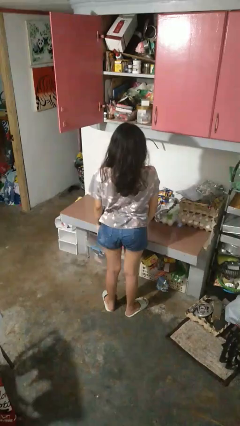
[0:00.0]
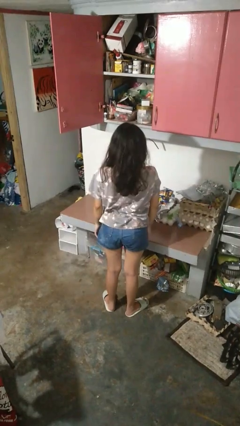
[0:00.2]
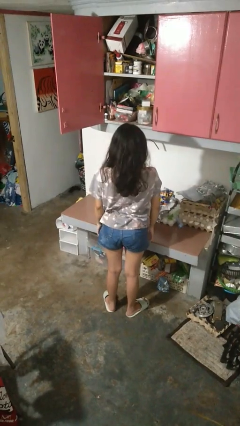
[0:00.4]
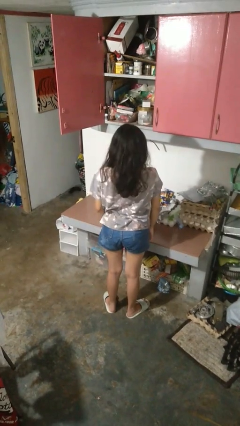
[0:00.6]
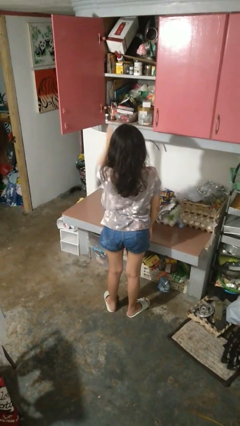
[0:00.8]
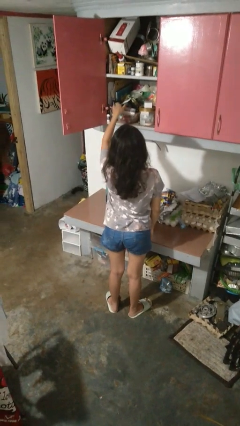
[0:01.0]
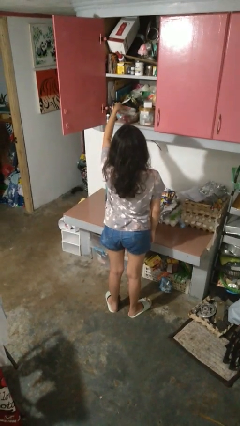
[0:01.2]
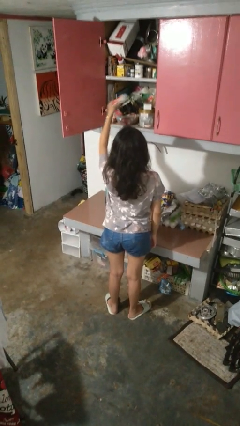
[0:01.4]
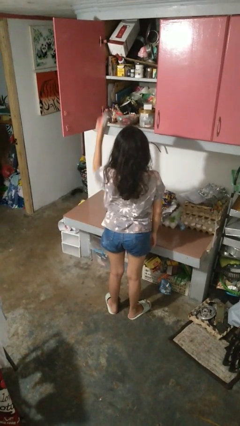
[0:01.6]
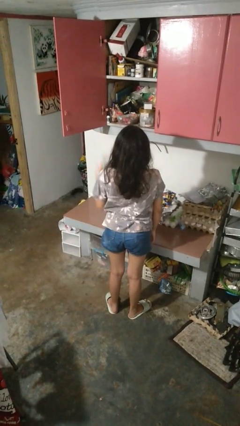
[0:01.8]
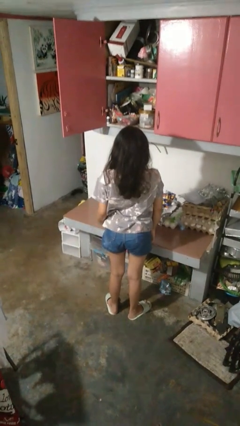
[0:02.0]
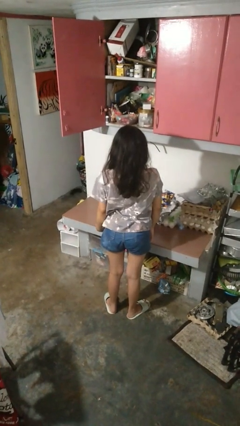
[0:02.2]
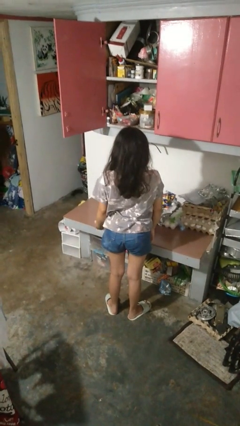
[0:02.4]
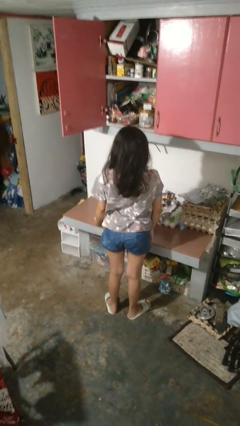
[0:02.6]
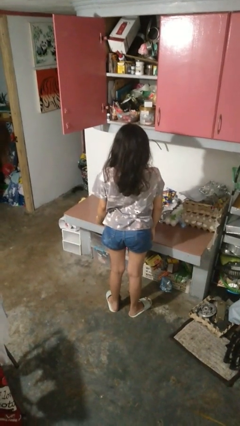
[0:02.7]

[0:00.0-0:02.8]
person takes object from cabinet

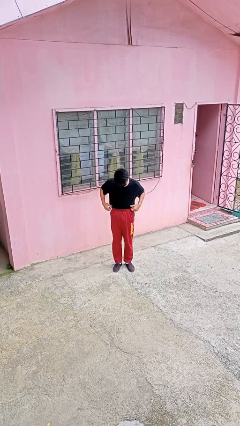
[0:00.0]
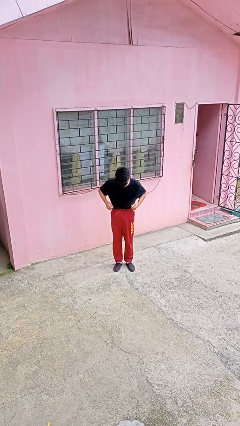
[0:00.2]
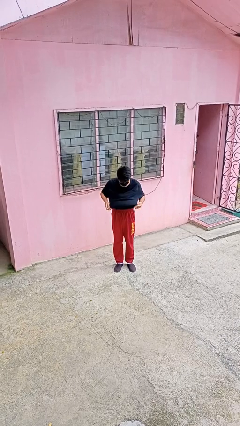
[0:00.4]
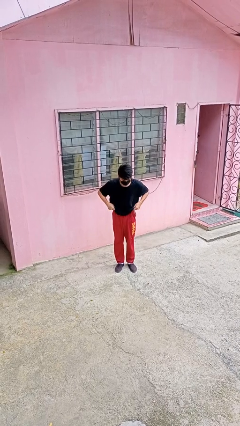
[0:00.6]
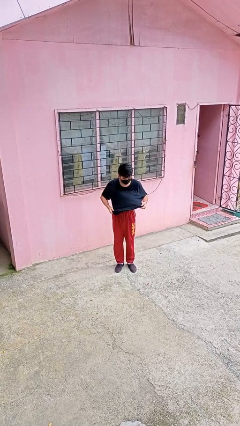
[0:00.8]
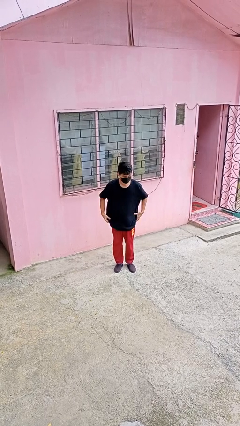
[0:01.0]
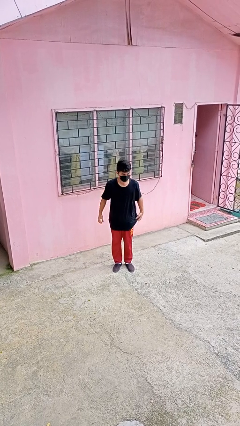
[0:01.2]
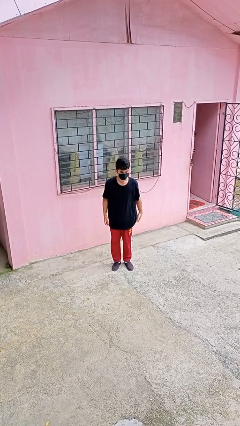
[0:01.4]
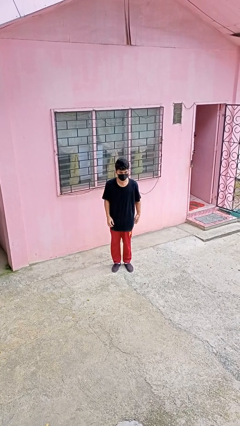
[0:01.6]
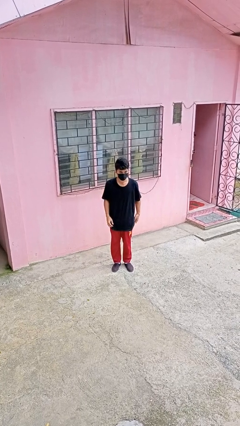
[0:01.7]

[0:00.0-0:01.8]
person untucks shirt

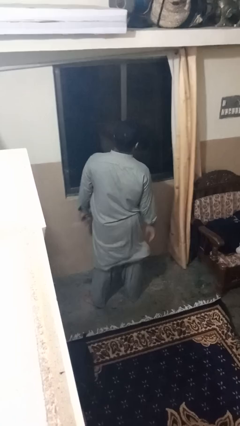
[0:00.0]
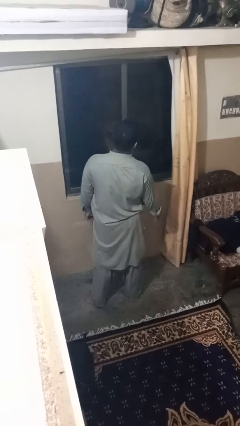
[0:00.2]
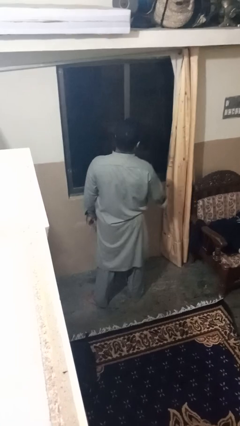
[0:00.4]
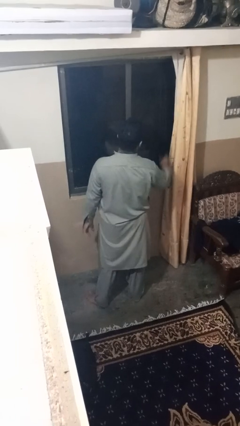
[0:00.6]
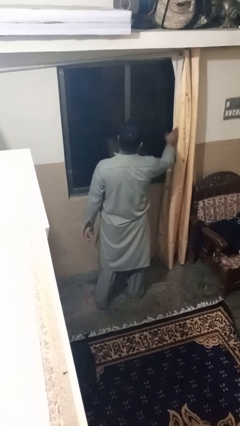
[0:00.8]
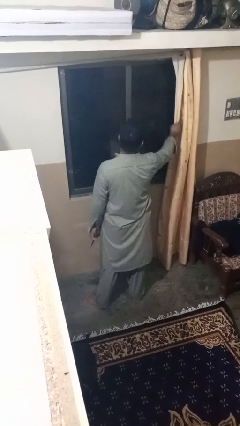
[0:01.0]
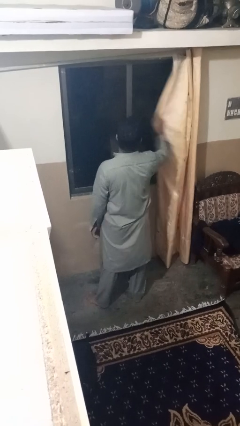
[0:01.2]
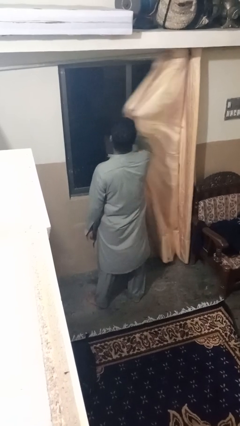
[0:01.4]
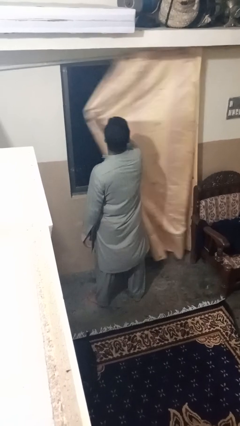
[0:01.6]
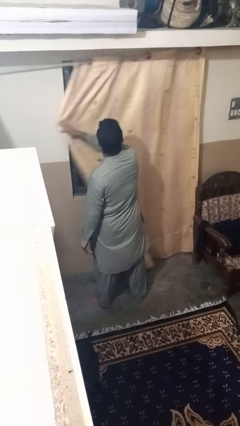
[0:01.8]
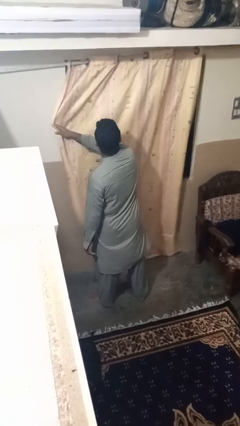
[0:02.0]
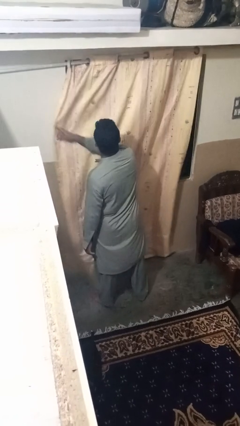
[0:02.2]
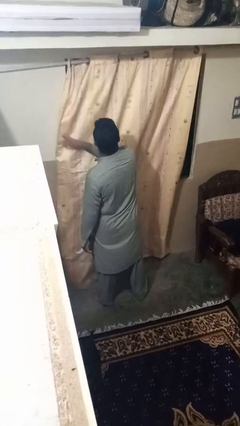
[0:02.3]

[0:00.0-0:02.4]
person closes curtains

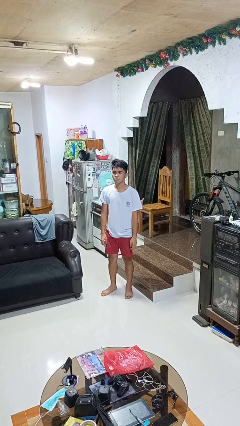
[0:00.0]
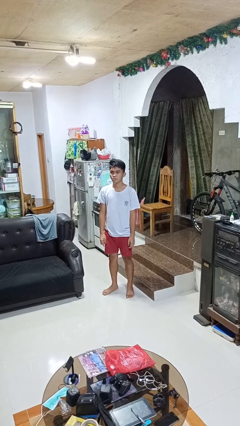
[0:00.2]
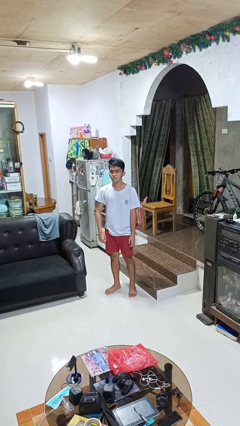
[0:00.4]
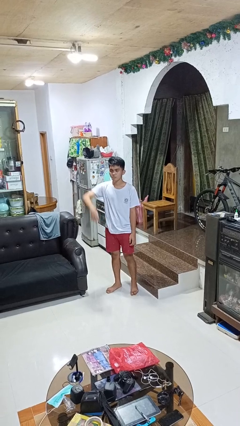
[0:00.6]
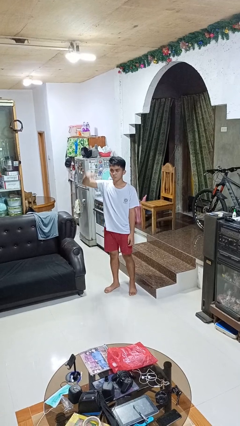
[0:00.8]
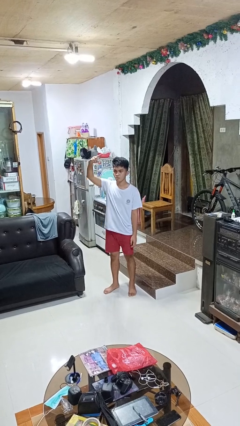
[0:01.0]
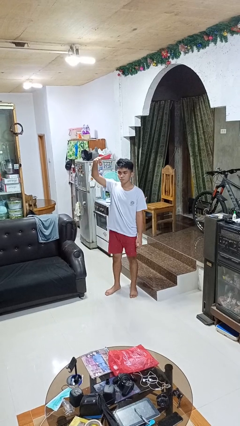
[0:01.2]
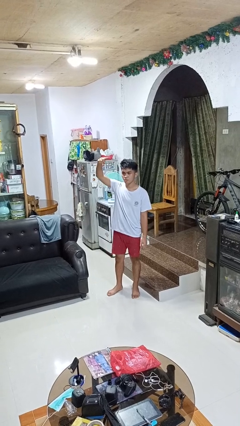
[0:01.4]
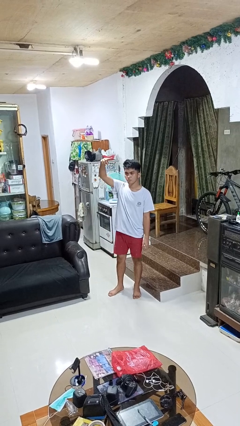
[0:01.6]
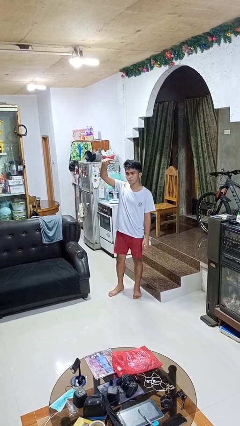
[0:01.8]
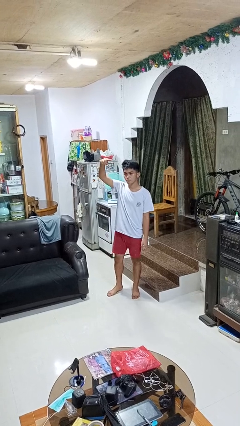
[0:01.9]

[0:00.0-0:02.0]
person gestures swipe up

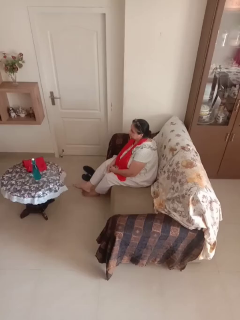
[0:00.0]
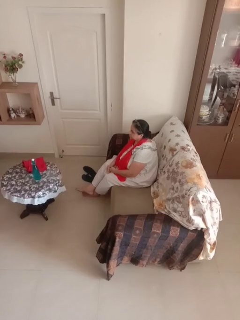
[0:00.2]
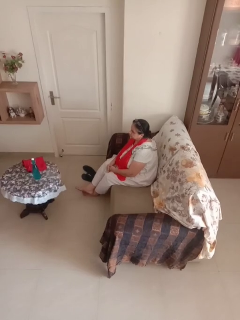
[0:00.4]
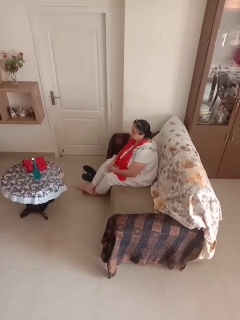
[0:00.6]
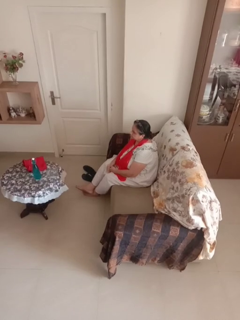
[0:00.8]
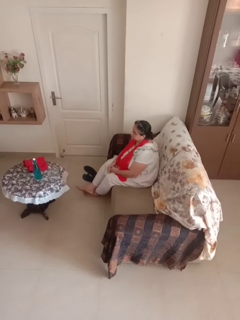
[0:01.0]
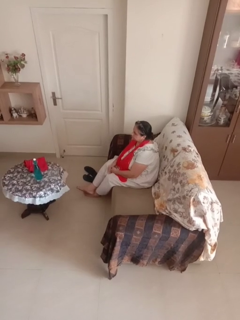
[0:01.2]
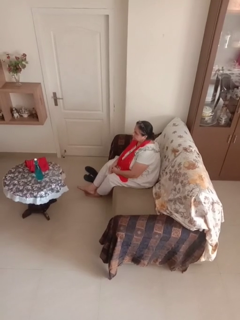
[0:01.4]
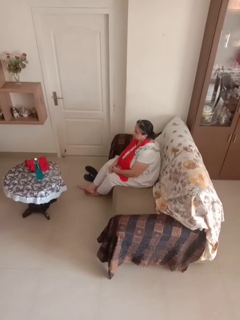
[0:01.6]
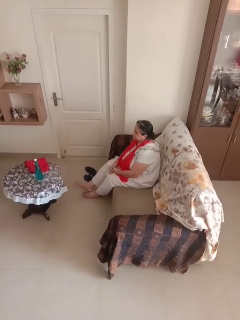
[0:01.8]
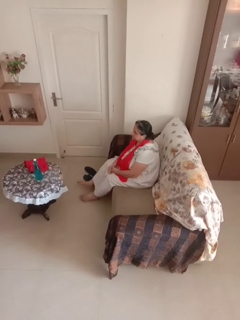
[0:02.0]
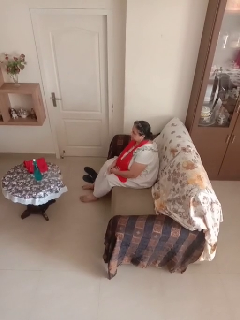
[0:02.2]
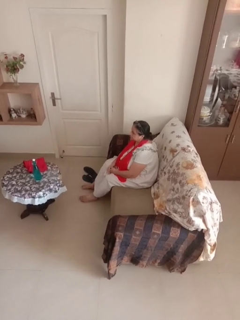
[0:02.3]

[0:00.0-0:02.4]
person crosses legs

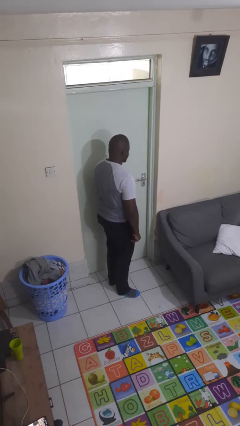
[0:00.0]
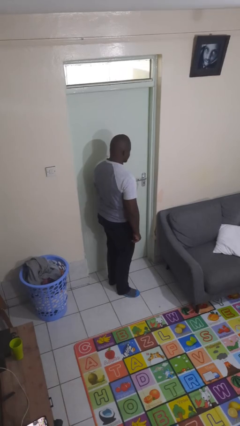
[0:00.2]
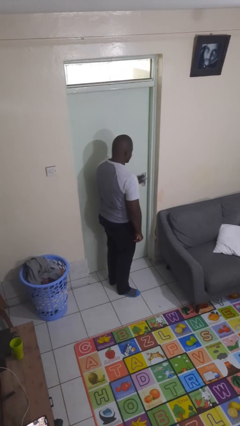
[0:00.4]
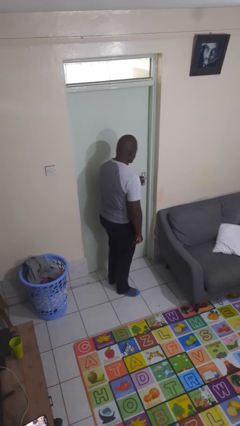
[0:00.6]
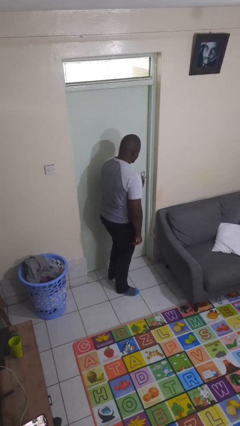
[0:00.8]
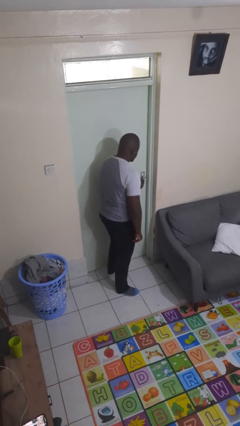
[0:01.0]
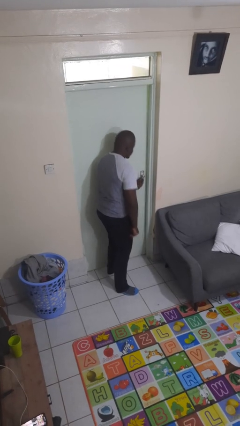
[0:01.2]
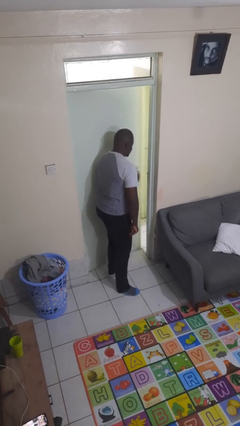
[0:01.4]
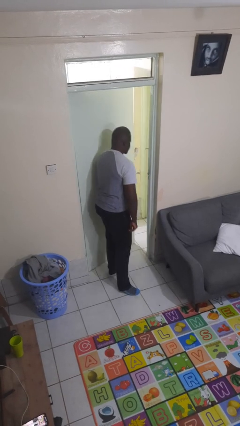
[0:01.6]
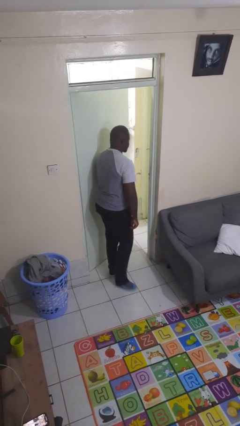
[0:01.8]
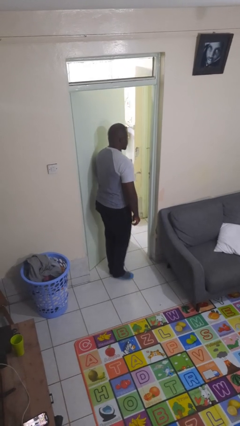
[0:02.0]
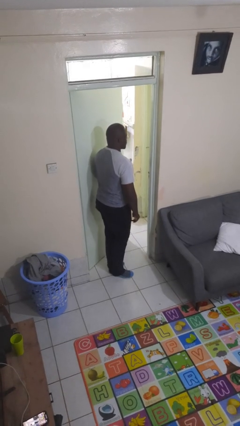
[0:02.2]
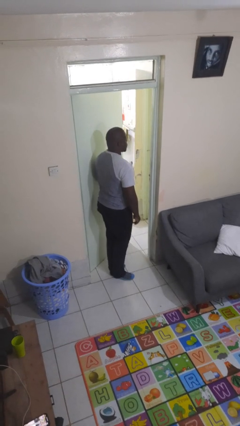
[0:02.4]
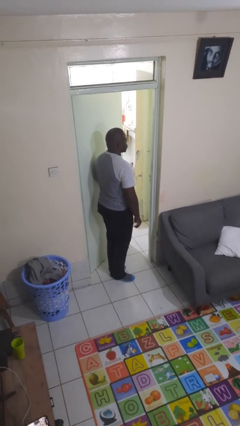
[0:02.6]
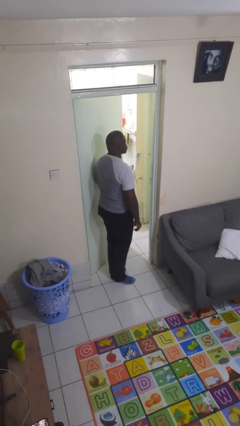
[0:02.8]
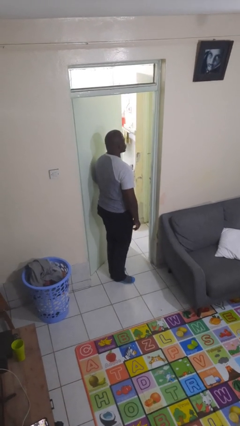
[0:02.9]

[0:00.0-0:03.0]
person opens facility door

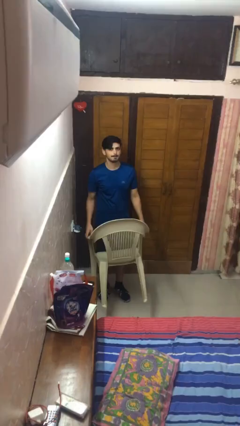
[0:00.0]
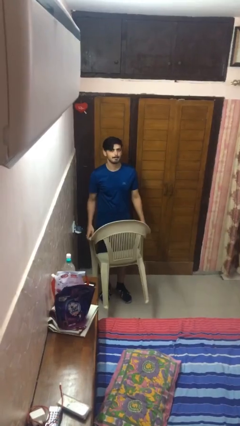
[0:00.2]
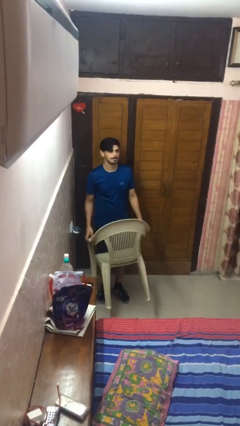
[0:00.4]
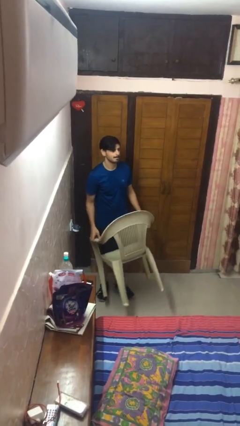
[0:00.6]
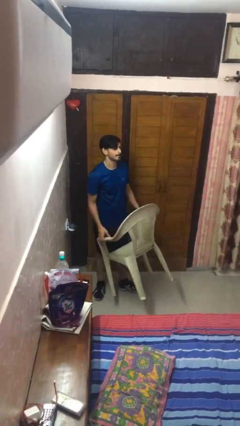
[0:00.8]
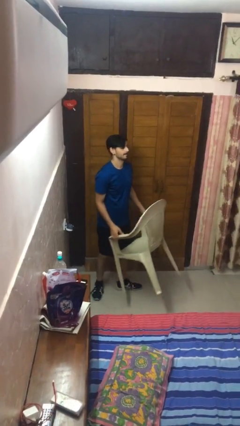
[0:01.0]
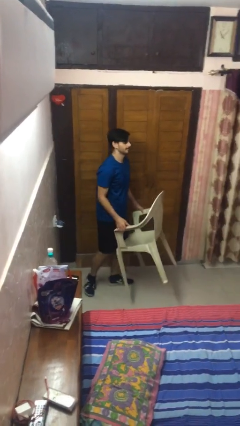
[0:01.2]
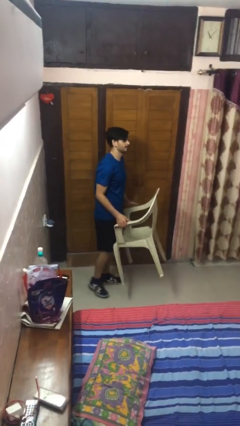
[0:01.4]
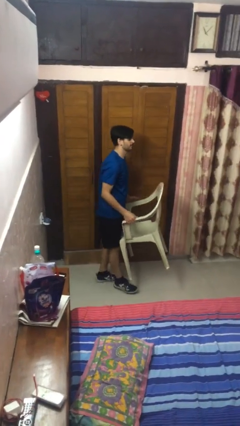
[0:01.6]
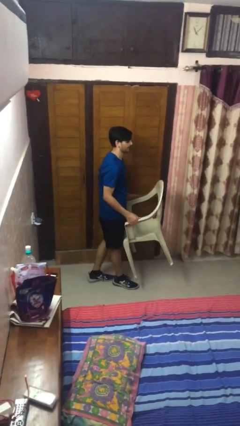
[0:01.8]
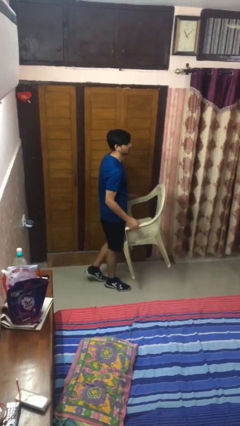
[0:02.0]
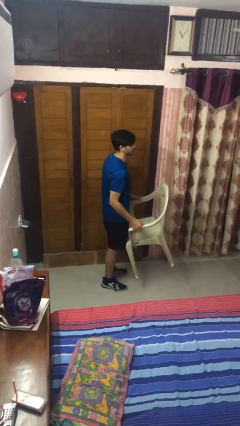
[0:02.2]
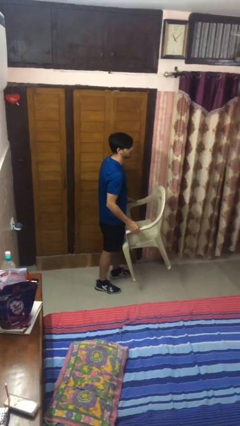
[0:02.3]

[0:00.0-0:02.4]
person carries furniture

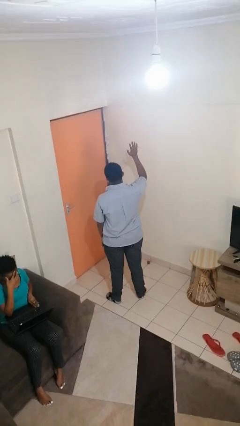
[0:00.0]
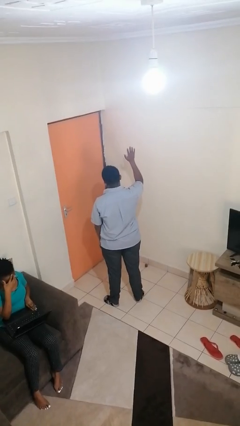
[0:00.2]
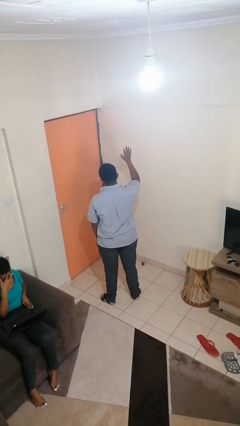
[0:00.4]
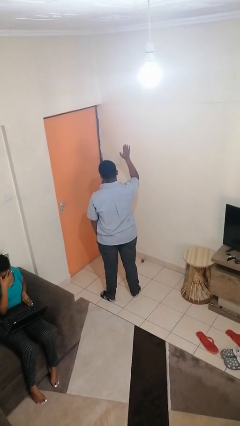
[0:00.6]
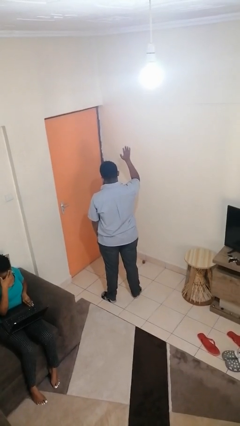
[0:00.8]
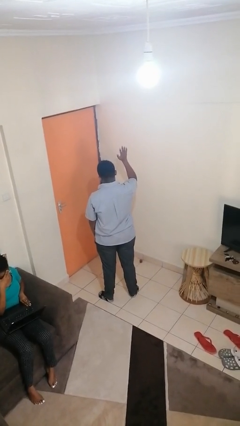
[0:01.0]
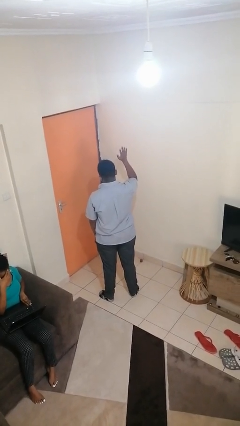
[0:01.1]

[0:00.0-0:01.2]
person exercises with jumping jacks
